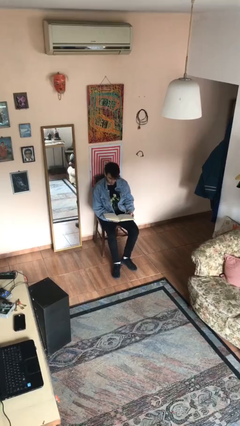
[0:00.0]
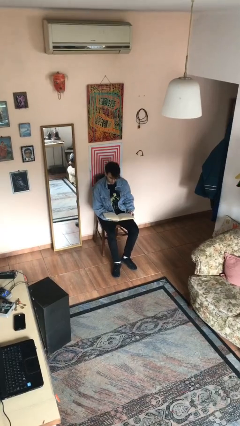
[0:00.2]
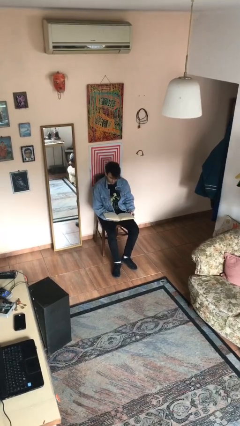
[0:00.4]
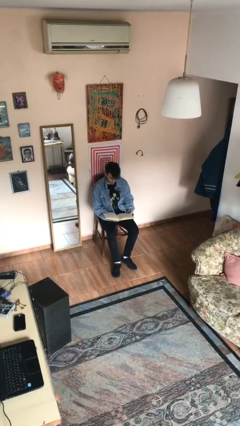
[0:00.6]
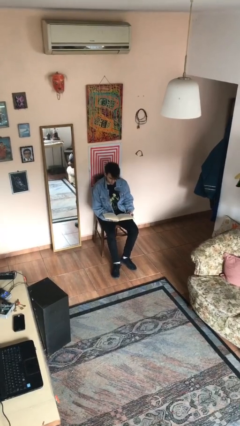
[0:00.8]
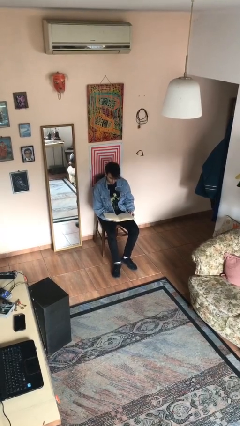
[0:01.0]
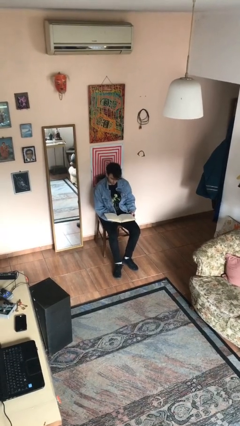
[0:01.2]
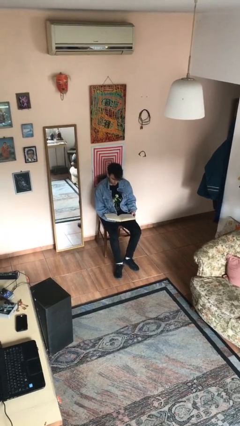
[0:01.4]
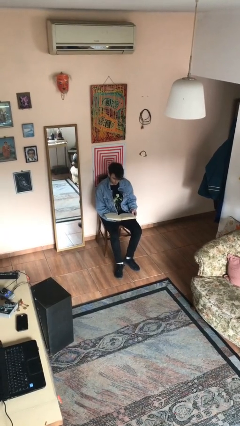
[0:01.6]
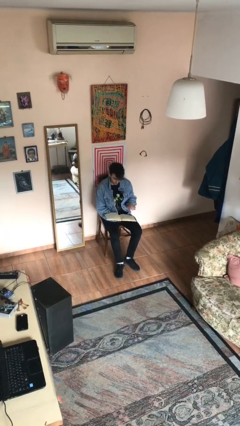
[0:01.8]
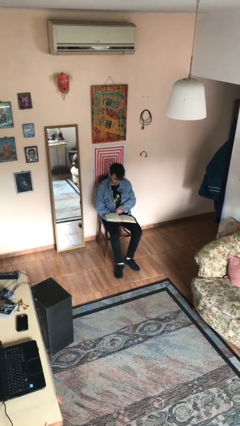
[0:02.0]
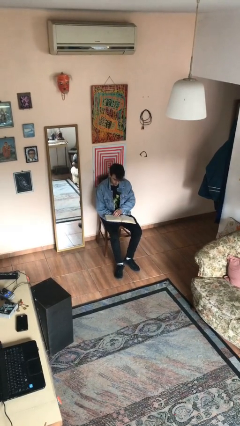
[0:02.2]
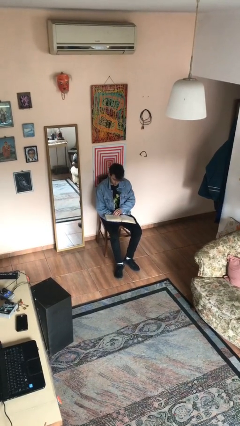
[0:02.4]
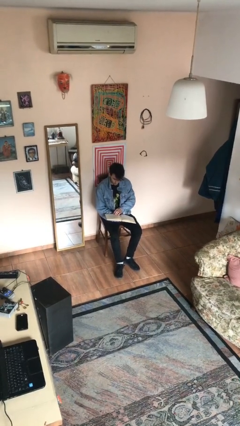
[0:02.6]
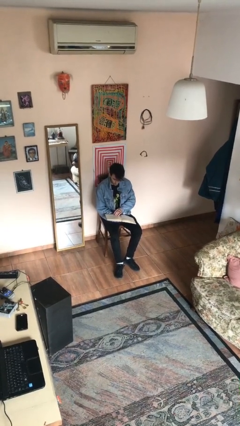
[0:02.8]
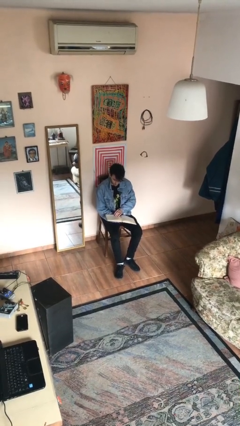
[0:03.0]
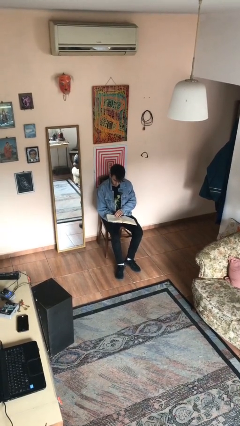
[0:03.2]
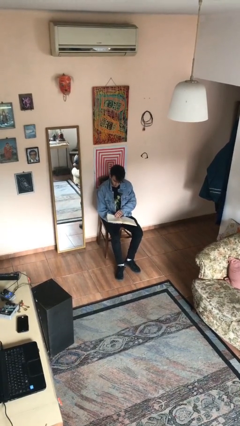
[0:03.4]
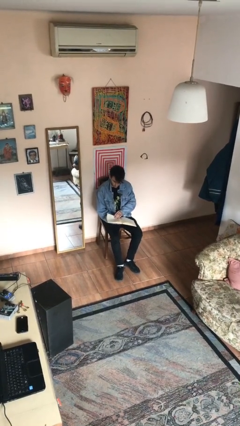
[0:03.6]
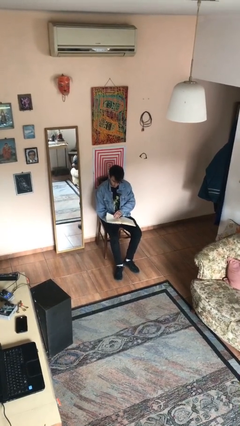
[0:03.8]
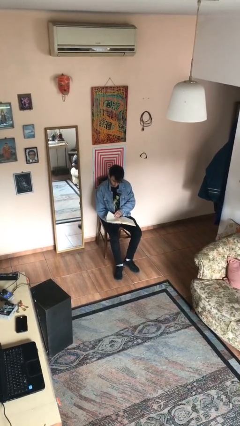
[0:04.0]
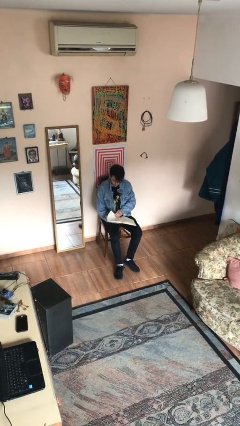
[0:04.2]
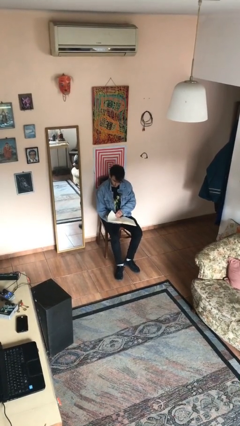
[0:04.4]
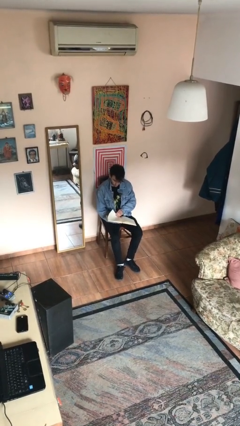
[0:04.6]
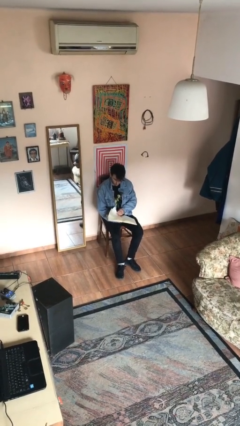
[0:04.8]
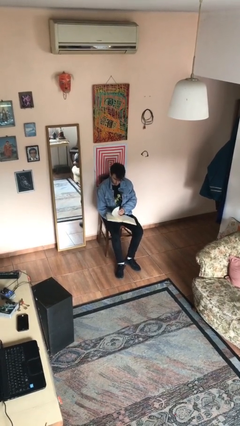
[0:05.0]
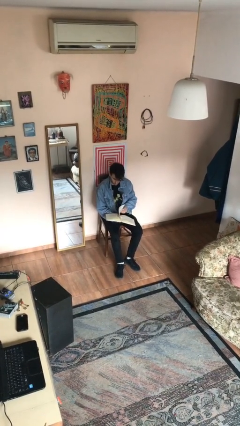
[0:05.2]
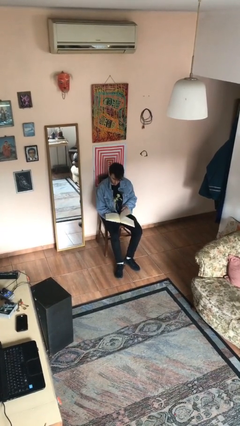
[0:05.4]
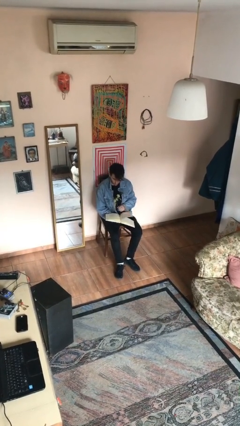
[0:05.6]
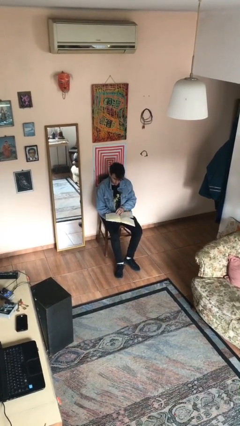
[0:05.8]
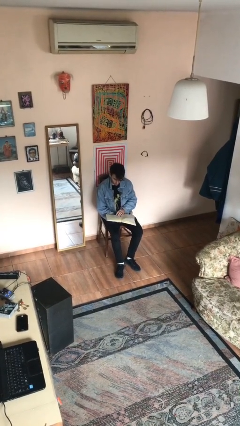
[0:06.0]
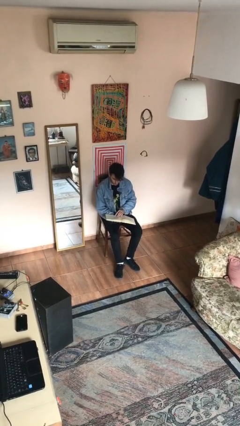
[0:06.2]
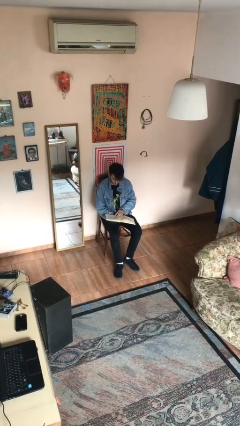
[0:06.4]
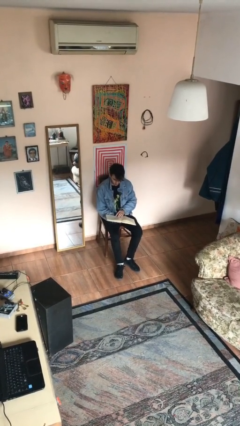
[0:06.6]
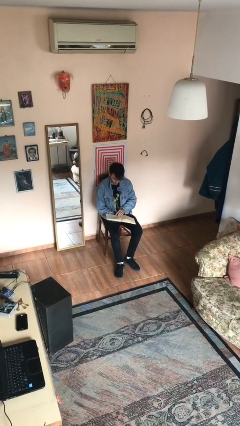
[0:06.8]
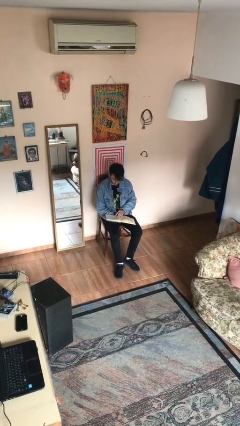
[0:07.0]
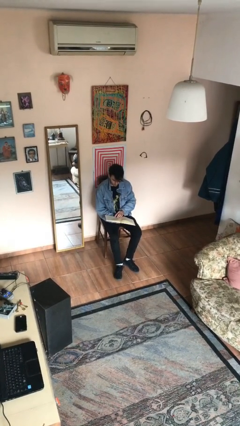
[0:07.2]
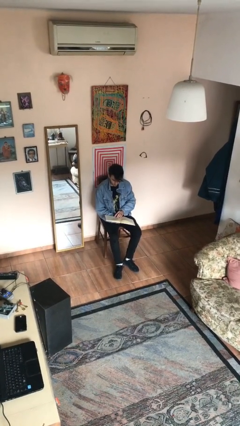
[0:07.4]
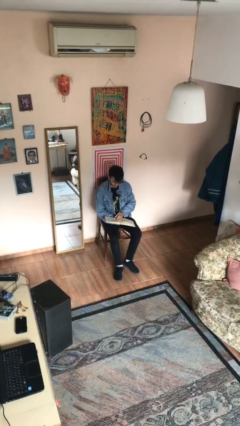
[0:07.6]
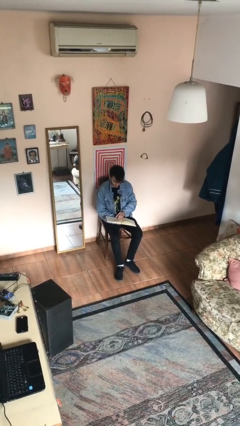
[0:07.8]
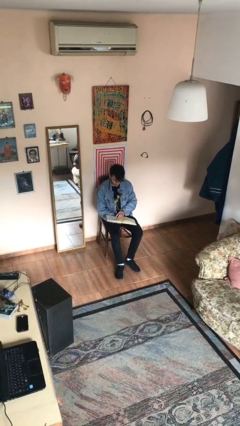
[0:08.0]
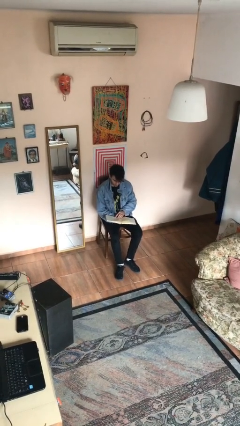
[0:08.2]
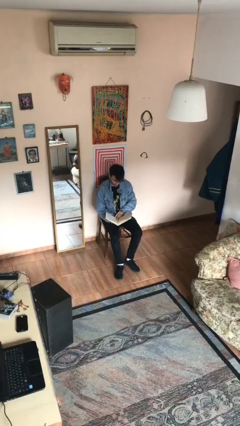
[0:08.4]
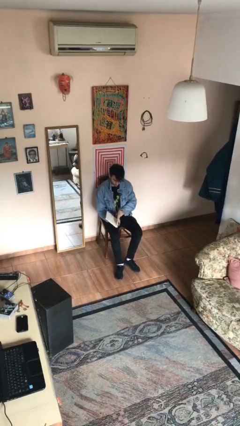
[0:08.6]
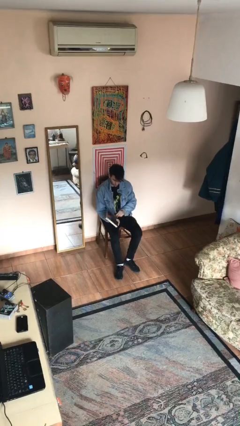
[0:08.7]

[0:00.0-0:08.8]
person reads document

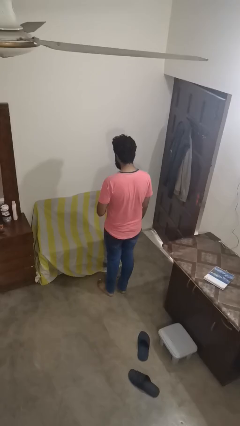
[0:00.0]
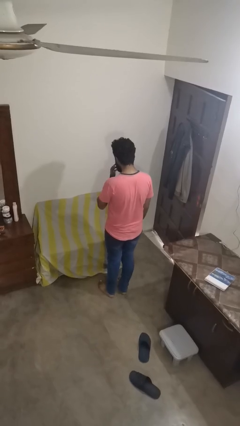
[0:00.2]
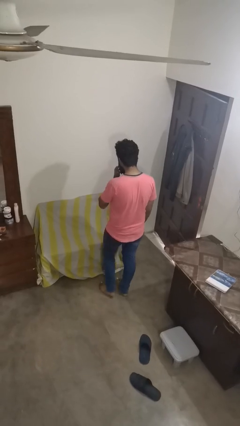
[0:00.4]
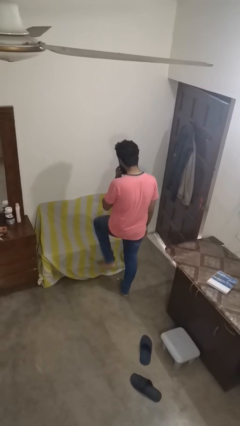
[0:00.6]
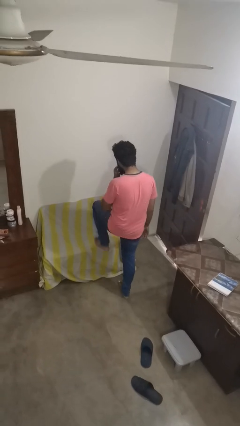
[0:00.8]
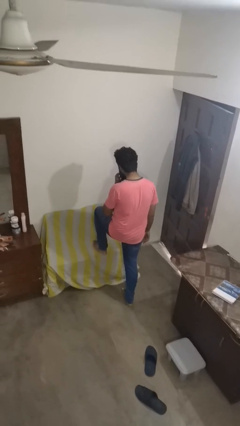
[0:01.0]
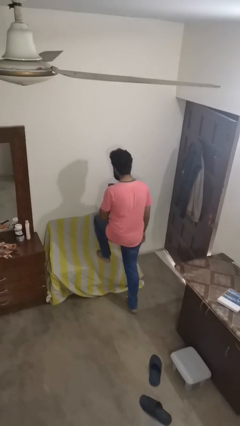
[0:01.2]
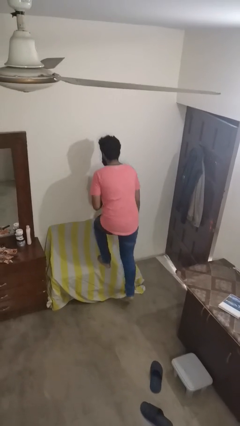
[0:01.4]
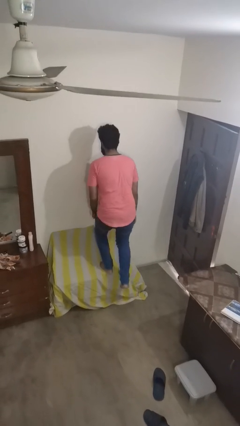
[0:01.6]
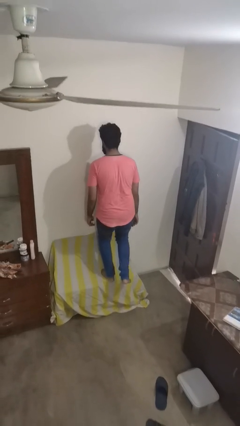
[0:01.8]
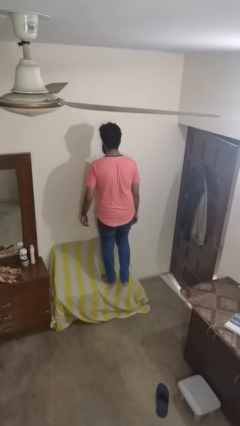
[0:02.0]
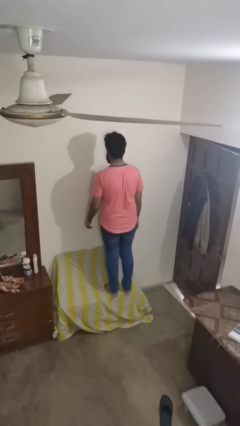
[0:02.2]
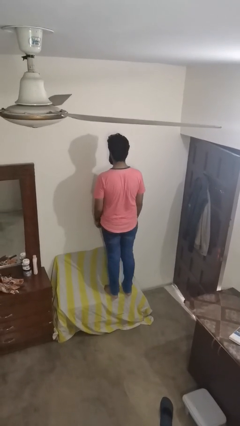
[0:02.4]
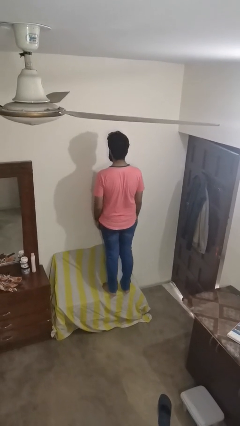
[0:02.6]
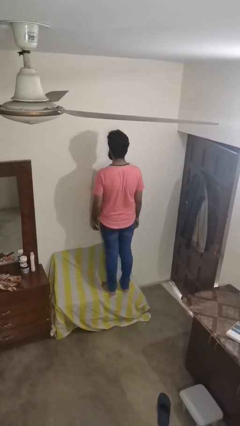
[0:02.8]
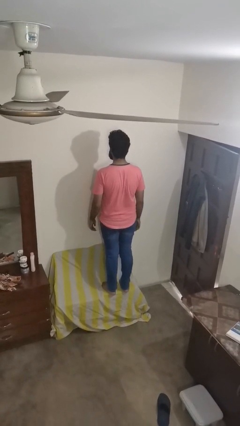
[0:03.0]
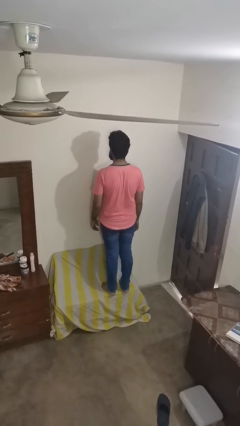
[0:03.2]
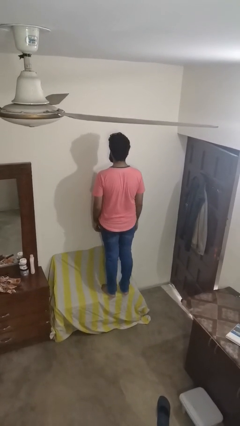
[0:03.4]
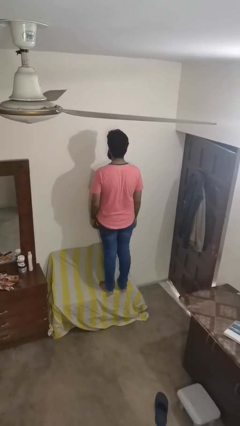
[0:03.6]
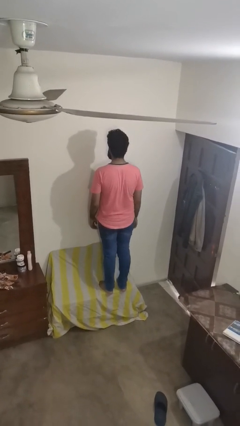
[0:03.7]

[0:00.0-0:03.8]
person climbs on couch

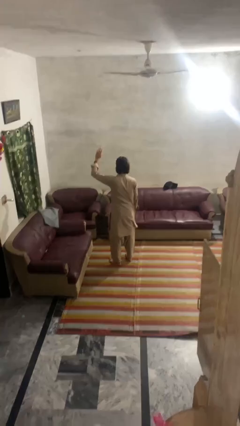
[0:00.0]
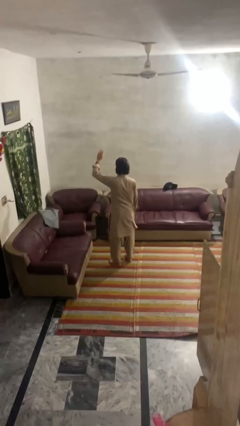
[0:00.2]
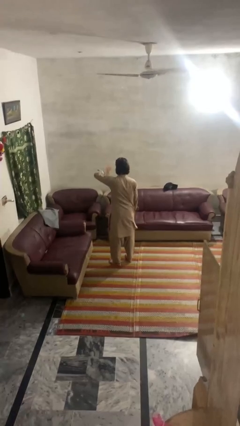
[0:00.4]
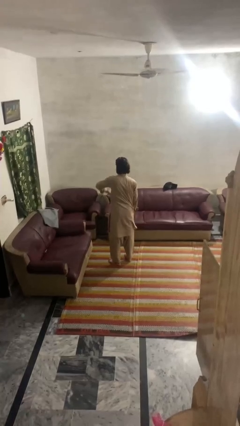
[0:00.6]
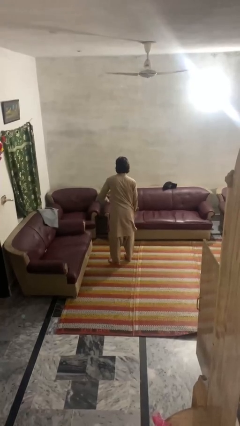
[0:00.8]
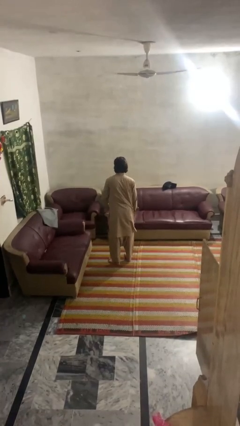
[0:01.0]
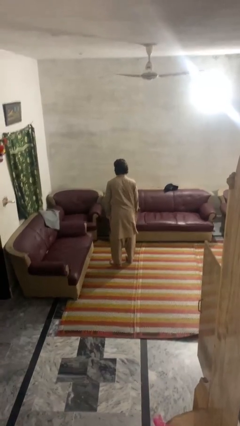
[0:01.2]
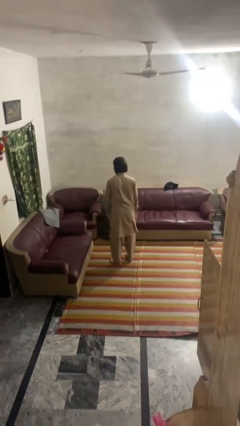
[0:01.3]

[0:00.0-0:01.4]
person gestures swipe down

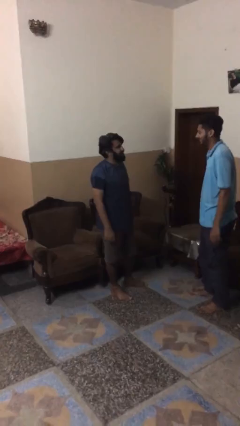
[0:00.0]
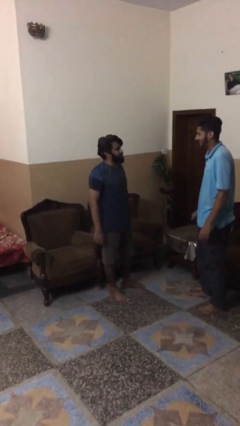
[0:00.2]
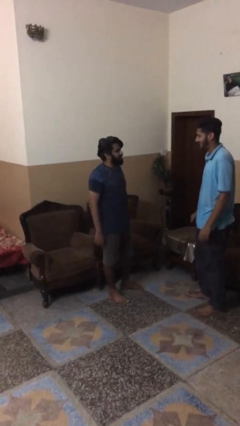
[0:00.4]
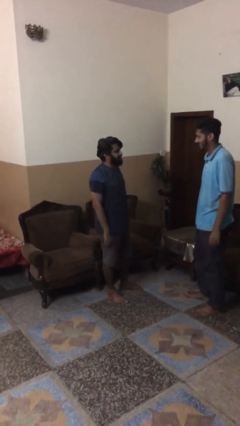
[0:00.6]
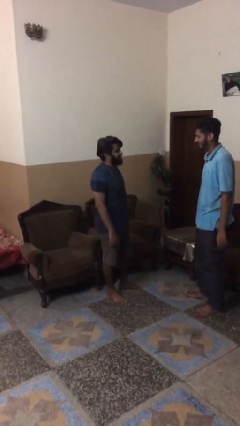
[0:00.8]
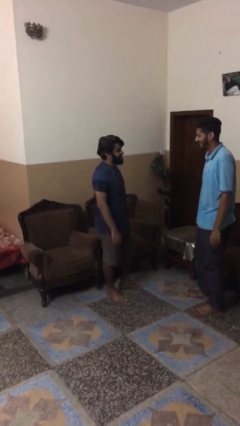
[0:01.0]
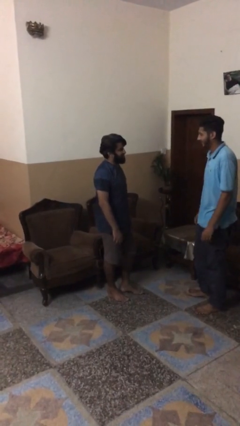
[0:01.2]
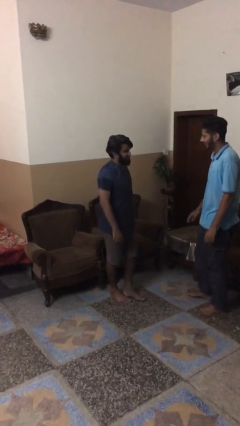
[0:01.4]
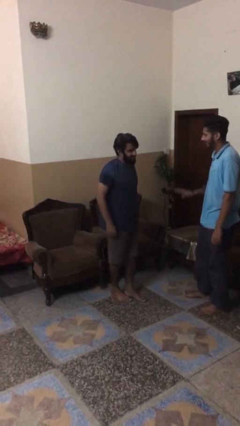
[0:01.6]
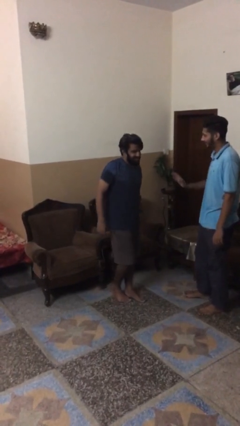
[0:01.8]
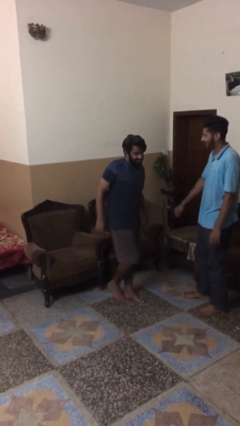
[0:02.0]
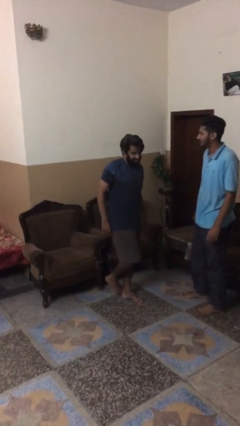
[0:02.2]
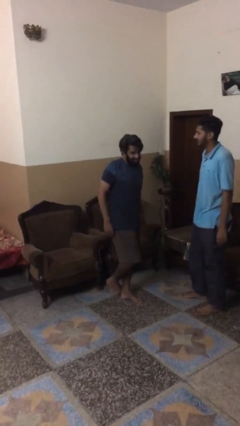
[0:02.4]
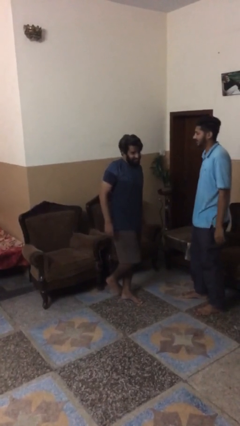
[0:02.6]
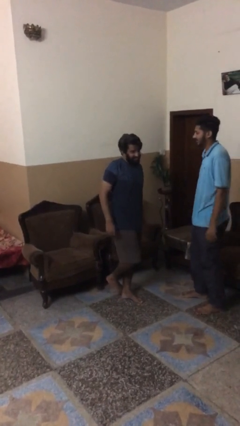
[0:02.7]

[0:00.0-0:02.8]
person talks to person

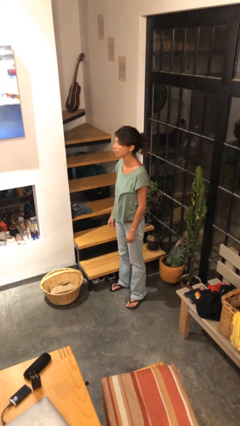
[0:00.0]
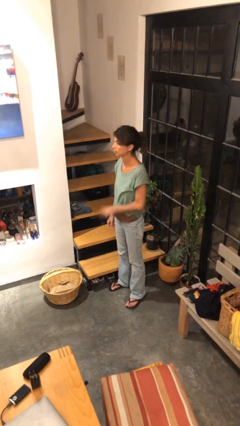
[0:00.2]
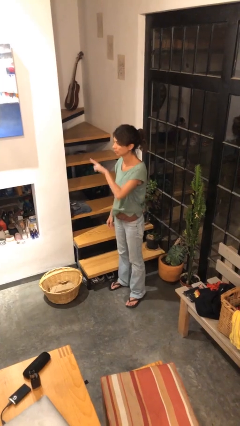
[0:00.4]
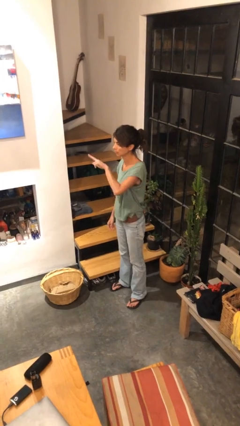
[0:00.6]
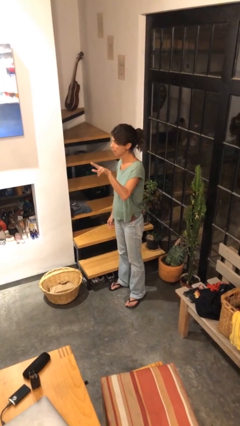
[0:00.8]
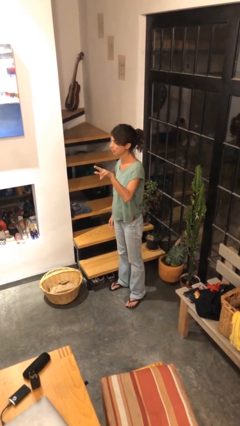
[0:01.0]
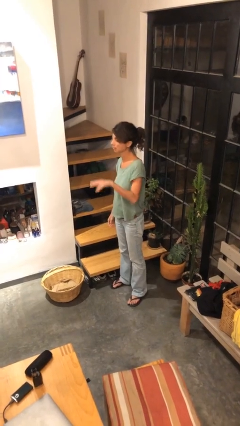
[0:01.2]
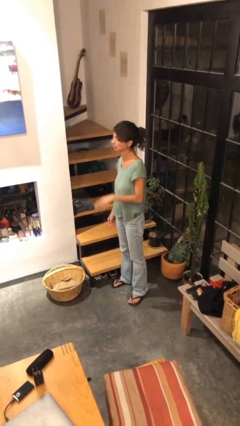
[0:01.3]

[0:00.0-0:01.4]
person gestures swipe left
